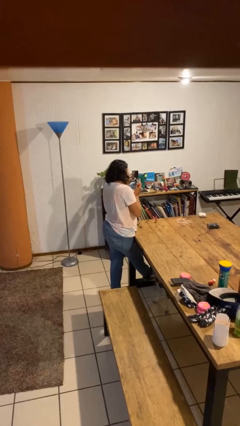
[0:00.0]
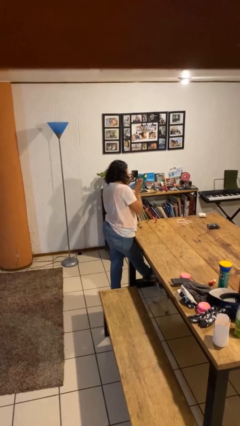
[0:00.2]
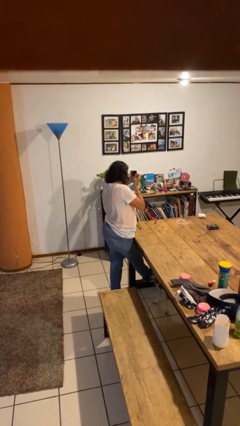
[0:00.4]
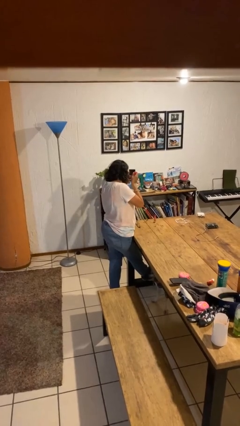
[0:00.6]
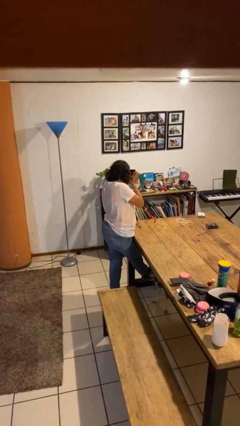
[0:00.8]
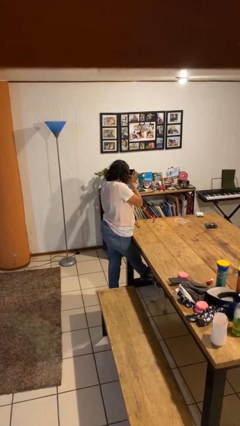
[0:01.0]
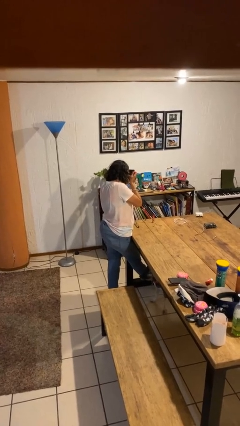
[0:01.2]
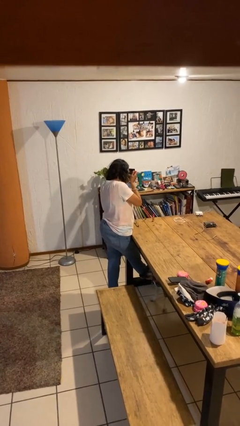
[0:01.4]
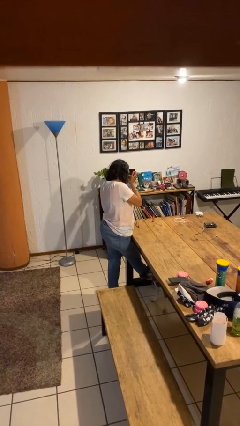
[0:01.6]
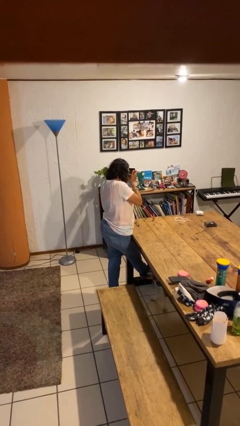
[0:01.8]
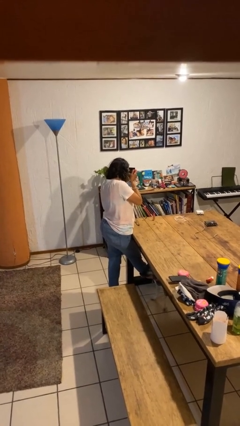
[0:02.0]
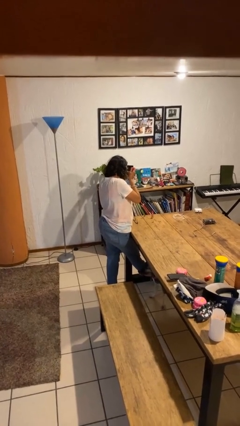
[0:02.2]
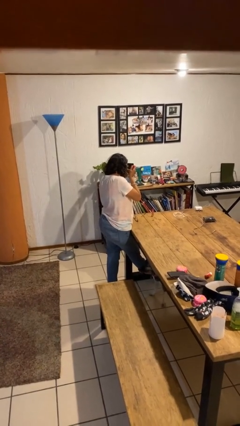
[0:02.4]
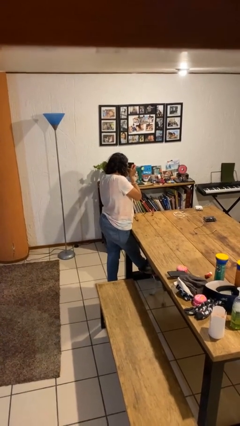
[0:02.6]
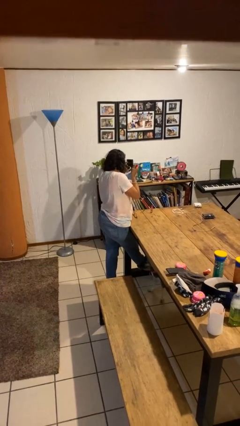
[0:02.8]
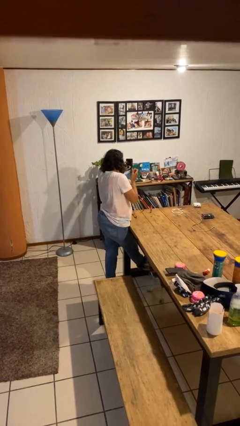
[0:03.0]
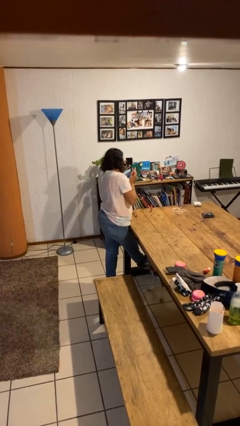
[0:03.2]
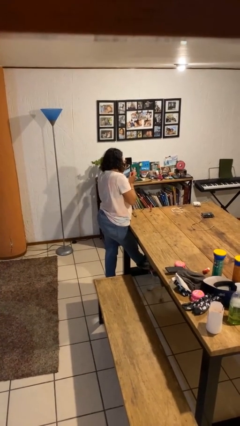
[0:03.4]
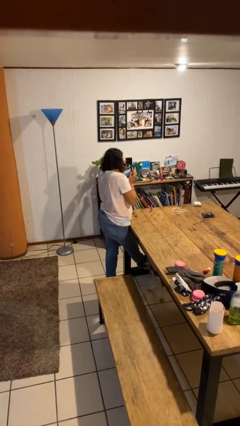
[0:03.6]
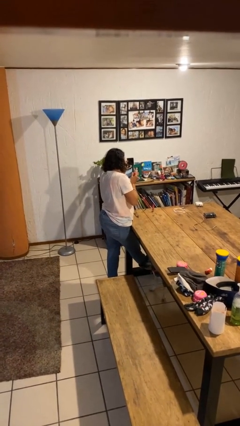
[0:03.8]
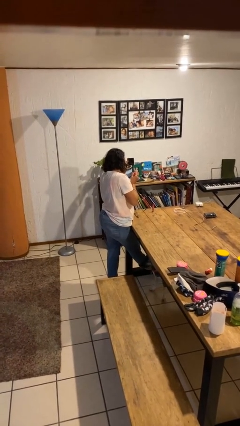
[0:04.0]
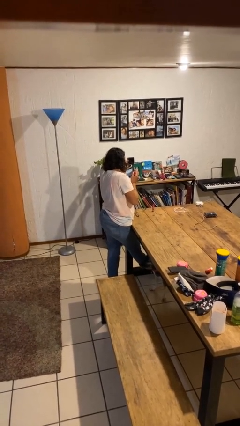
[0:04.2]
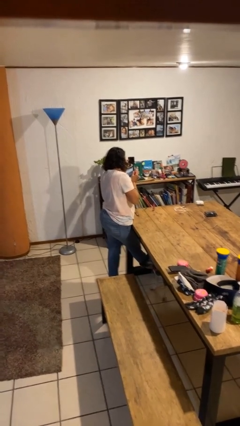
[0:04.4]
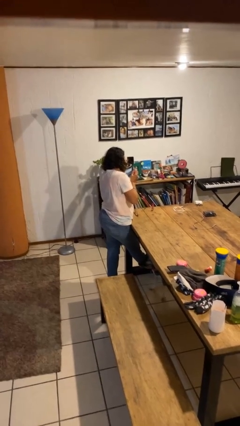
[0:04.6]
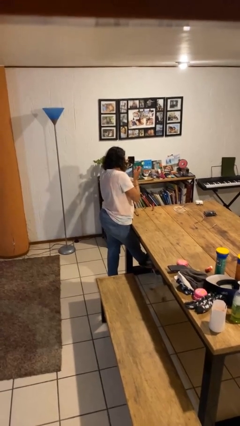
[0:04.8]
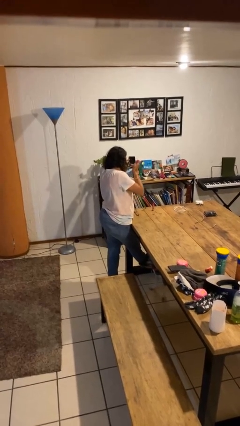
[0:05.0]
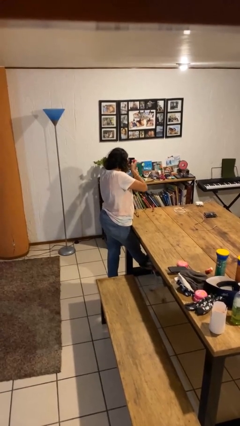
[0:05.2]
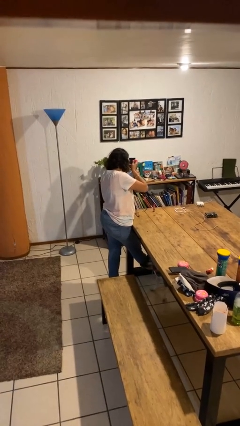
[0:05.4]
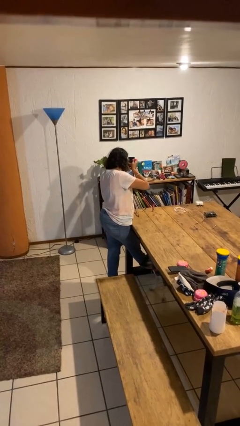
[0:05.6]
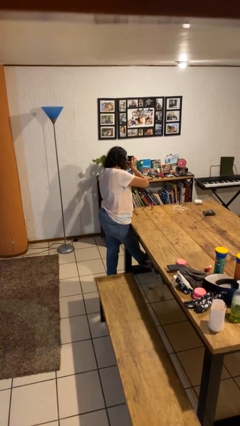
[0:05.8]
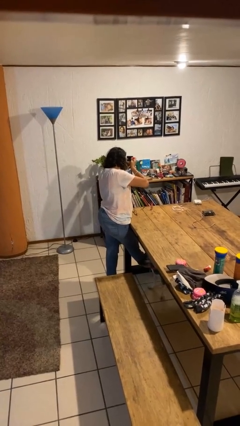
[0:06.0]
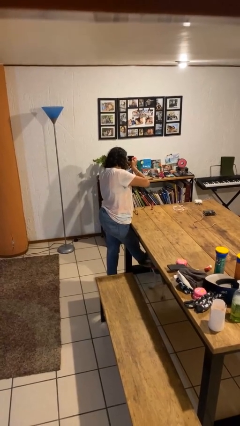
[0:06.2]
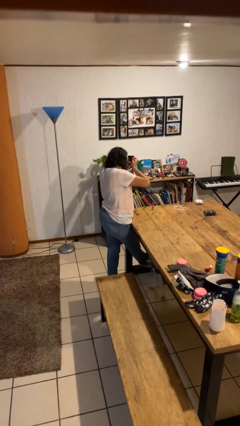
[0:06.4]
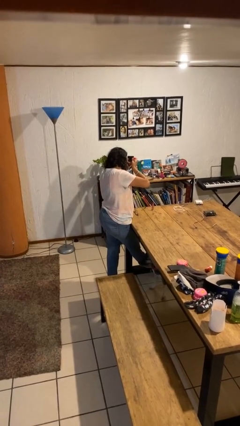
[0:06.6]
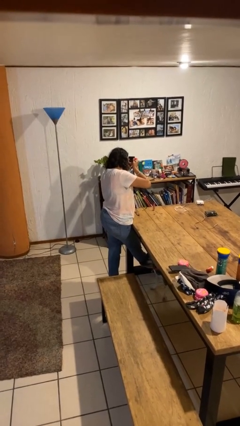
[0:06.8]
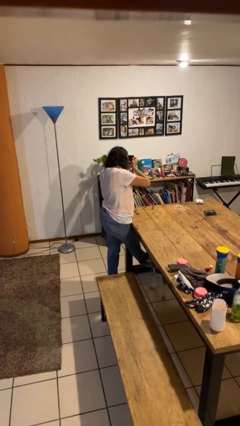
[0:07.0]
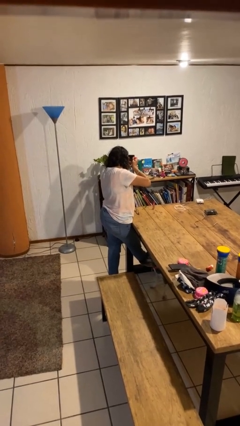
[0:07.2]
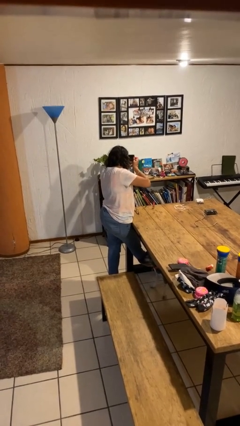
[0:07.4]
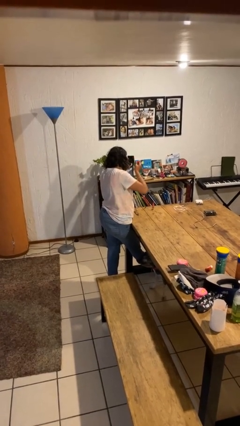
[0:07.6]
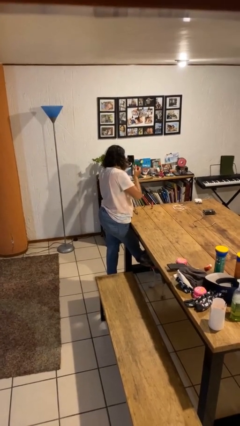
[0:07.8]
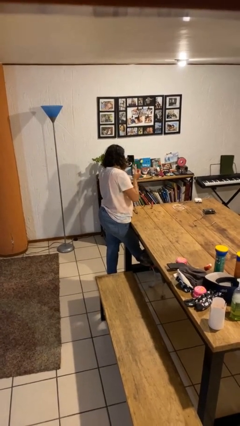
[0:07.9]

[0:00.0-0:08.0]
person applies eye makeup

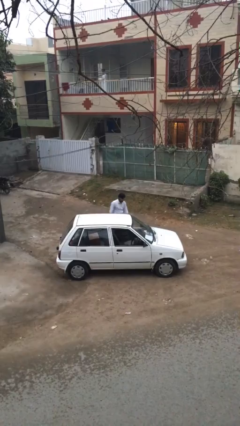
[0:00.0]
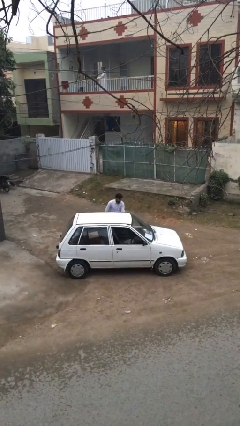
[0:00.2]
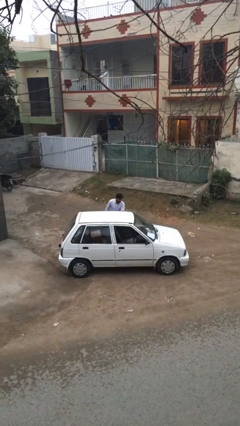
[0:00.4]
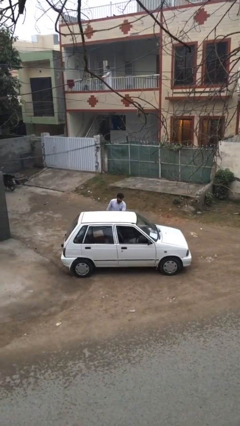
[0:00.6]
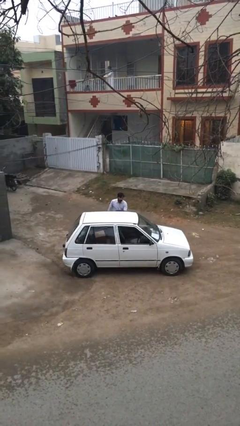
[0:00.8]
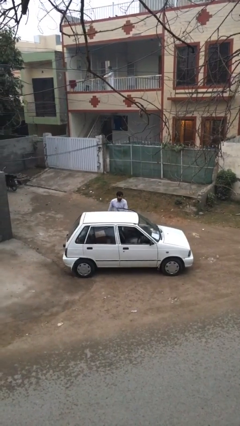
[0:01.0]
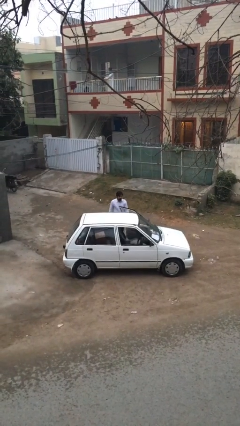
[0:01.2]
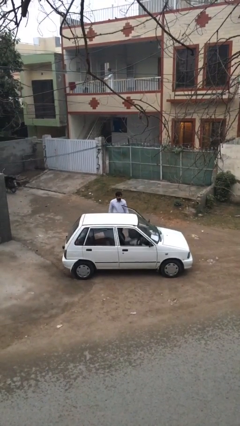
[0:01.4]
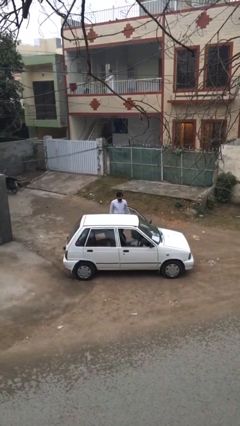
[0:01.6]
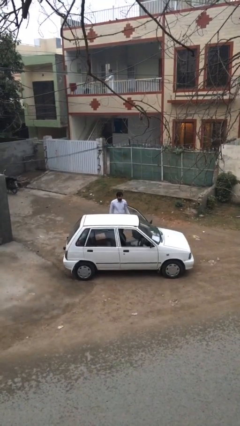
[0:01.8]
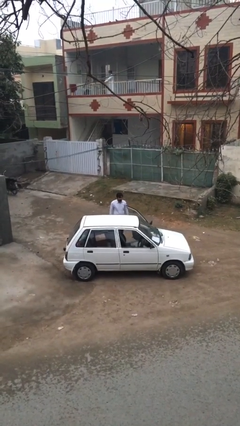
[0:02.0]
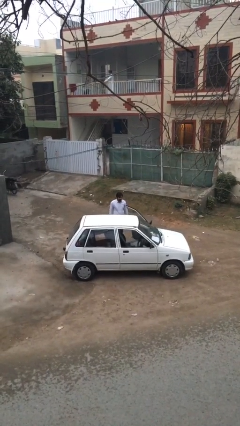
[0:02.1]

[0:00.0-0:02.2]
person opens car door

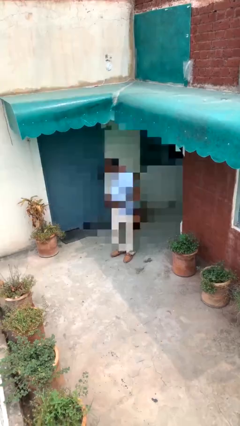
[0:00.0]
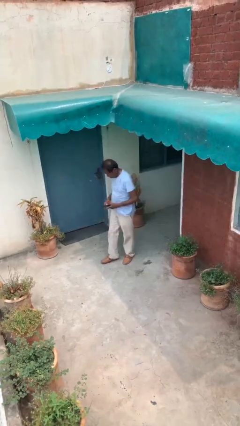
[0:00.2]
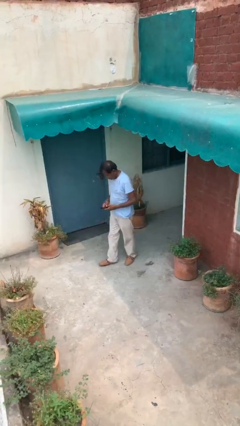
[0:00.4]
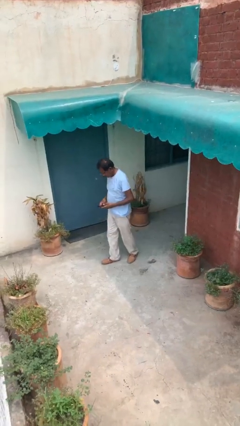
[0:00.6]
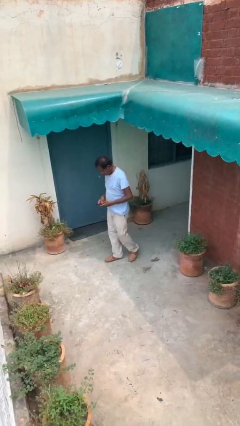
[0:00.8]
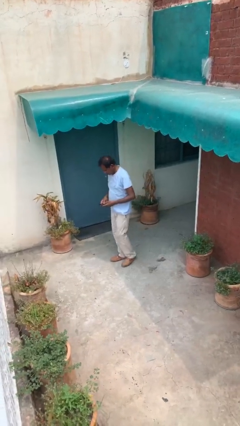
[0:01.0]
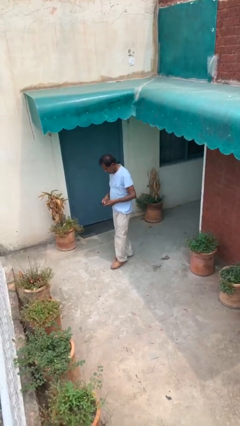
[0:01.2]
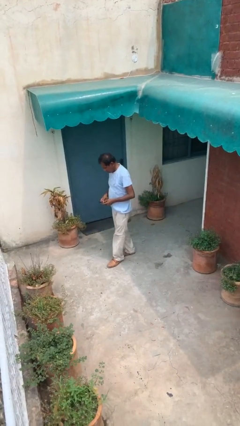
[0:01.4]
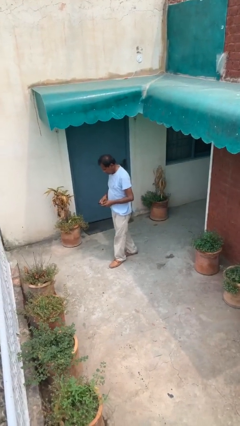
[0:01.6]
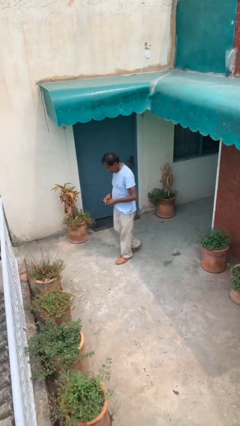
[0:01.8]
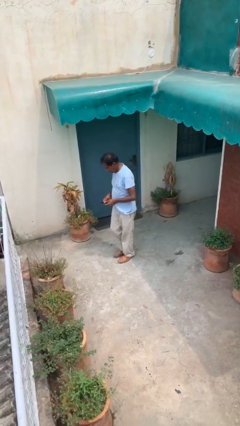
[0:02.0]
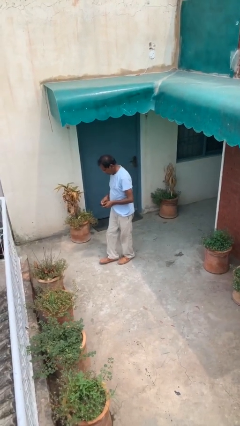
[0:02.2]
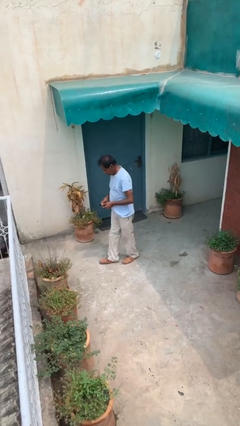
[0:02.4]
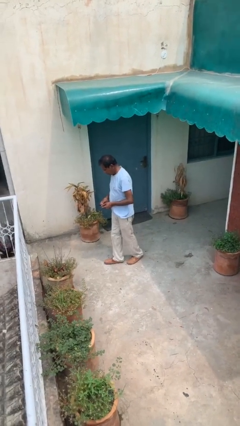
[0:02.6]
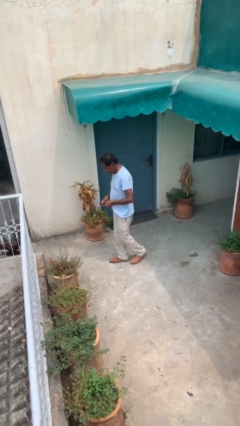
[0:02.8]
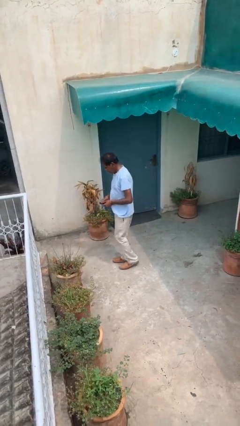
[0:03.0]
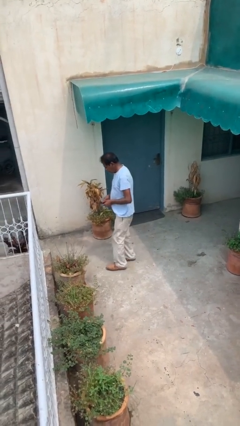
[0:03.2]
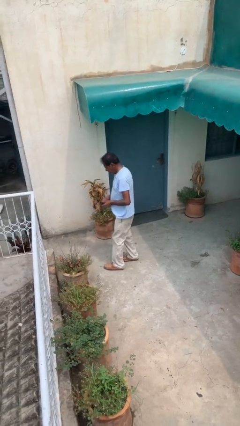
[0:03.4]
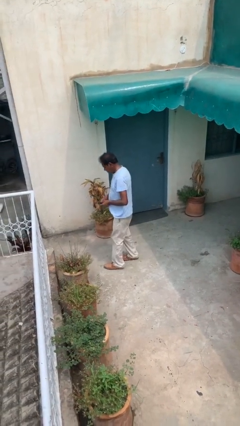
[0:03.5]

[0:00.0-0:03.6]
person texts on phone

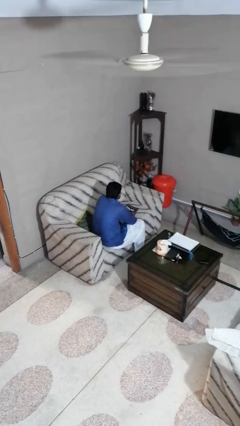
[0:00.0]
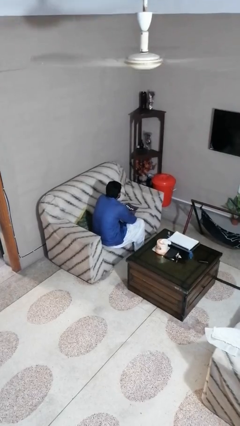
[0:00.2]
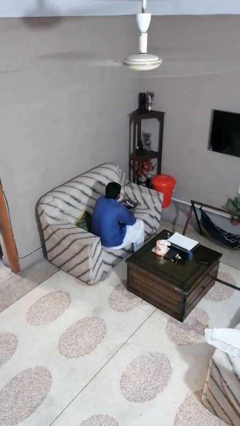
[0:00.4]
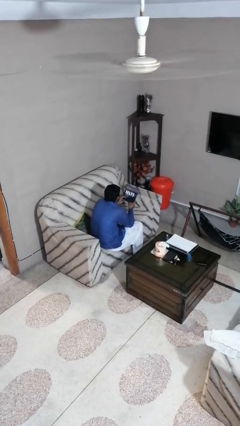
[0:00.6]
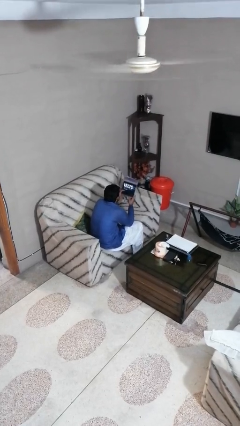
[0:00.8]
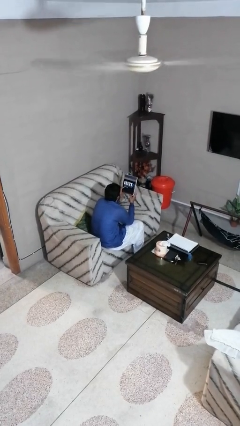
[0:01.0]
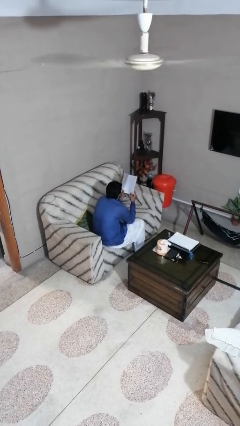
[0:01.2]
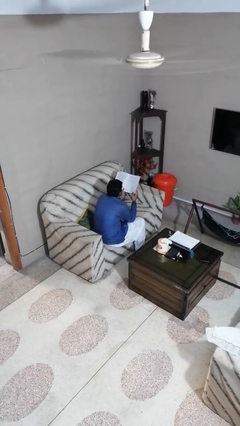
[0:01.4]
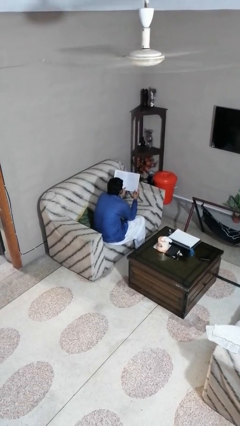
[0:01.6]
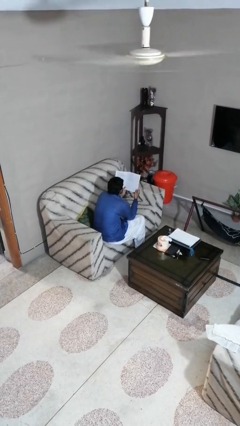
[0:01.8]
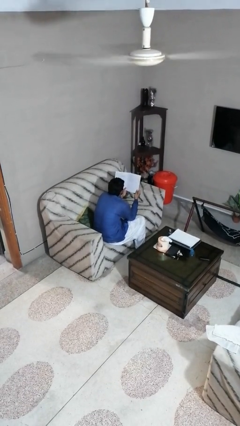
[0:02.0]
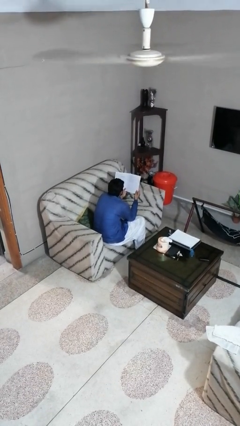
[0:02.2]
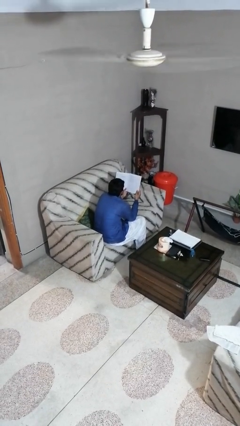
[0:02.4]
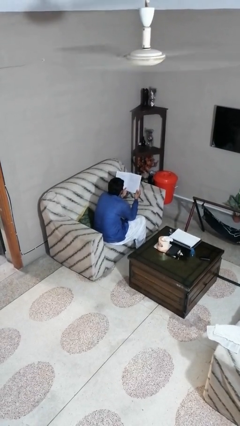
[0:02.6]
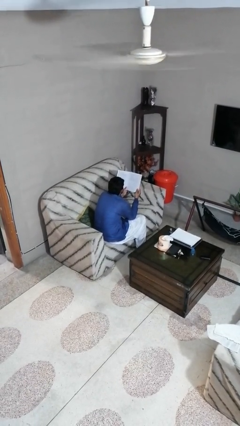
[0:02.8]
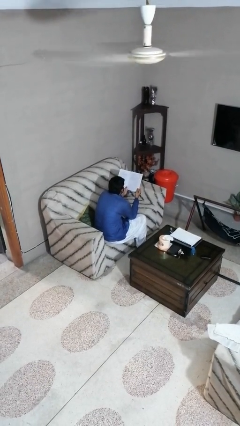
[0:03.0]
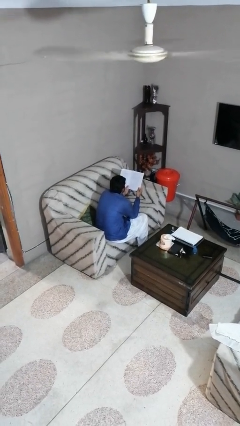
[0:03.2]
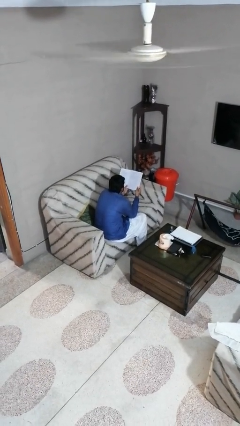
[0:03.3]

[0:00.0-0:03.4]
person reads book

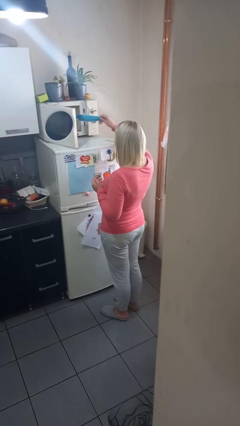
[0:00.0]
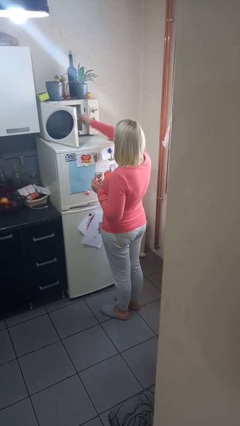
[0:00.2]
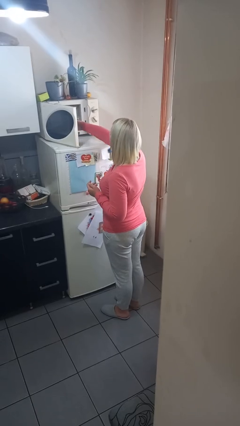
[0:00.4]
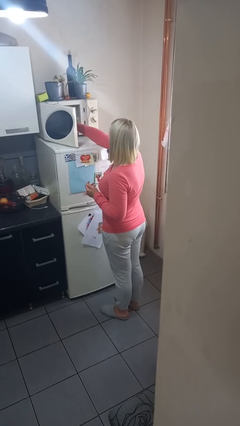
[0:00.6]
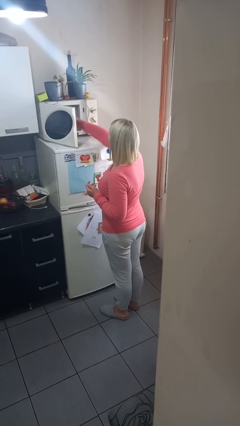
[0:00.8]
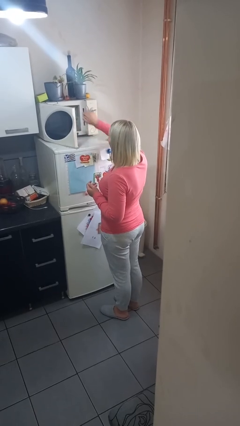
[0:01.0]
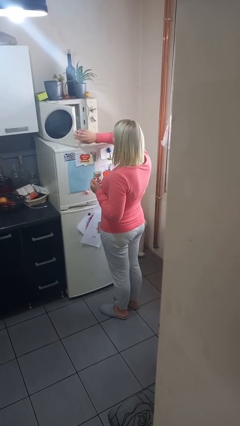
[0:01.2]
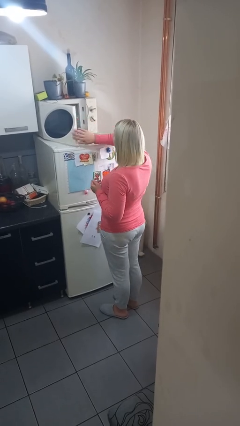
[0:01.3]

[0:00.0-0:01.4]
person puts object into microwave
